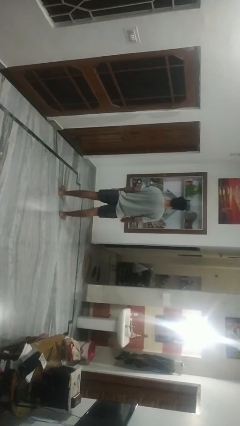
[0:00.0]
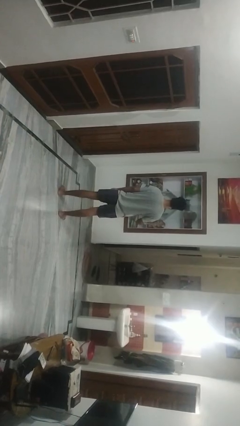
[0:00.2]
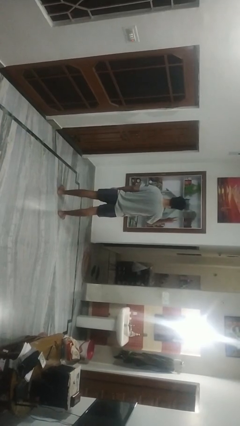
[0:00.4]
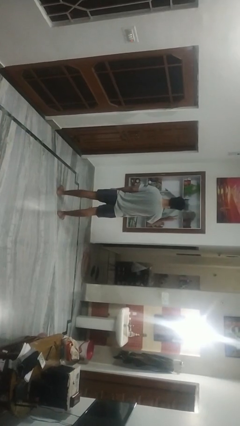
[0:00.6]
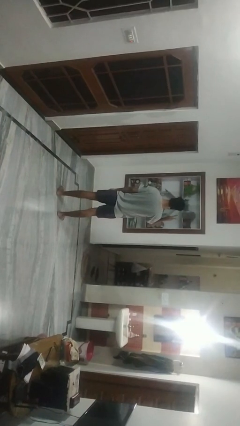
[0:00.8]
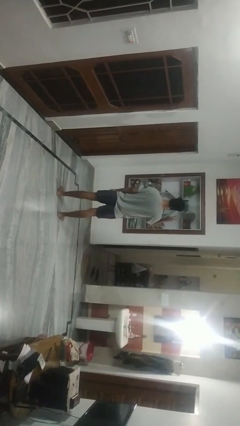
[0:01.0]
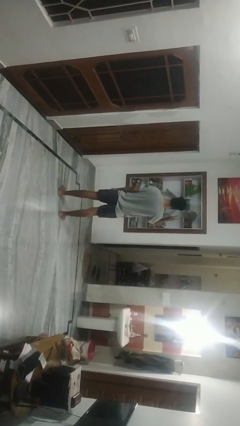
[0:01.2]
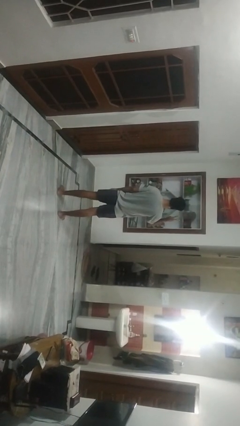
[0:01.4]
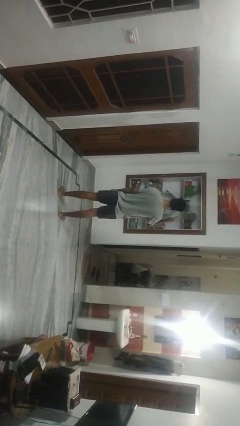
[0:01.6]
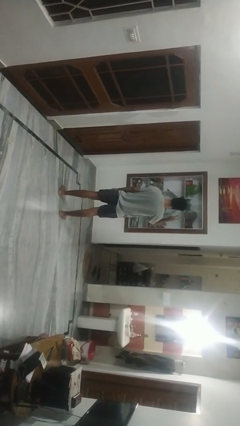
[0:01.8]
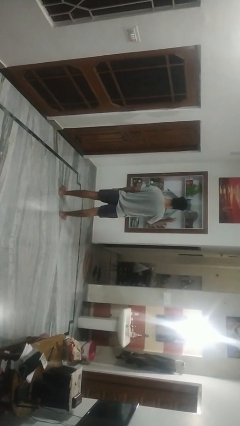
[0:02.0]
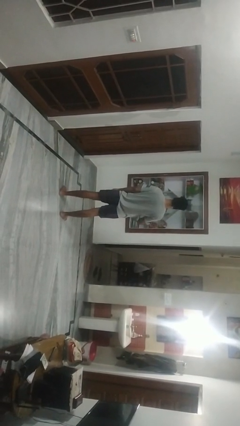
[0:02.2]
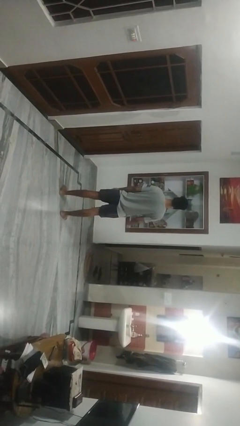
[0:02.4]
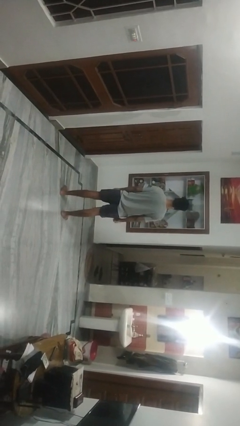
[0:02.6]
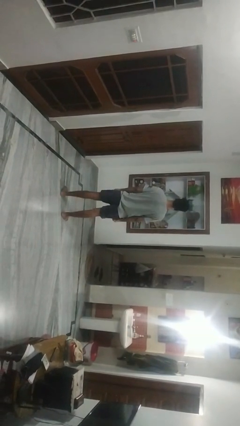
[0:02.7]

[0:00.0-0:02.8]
person gestures peace

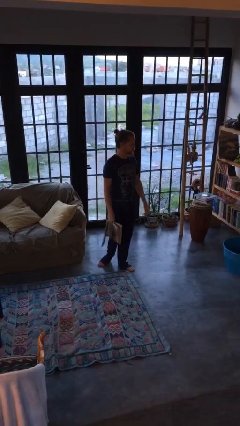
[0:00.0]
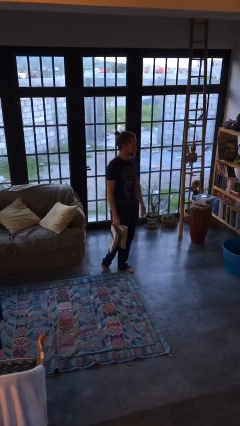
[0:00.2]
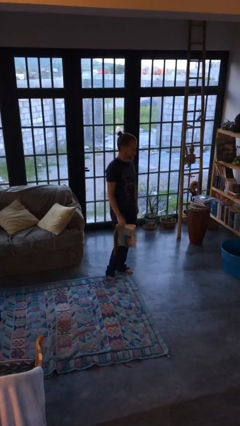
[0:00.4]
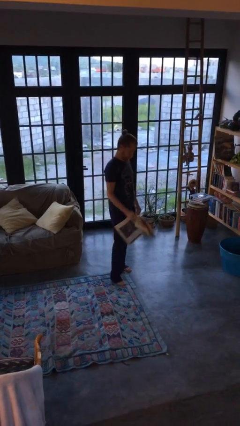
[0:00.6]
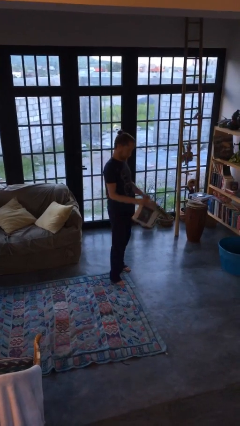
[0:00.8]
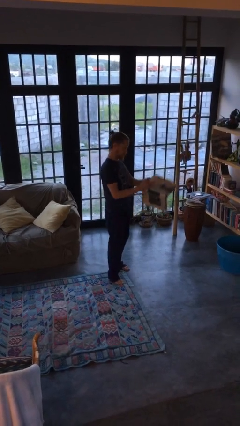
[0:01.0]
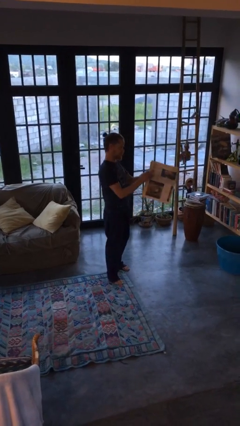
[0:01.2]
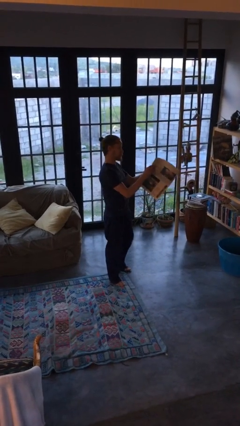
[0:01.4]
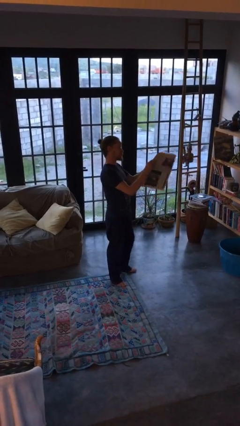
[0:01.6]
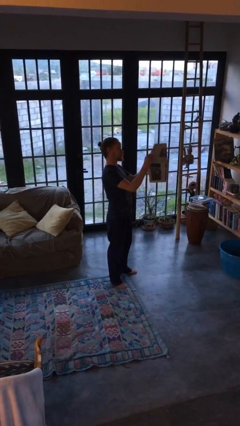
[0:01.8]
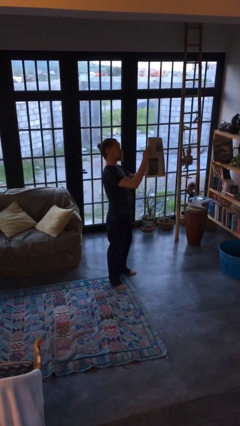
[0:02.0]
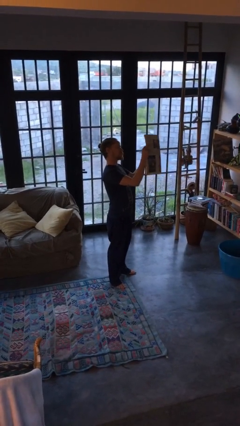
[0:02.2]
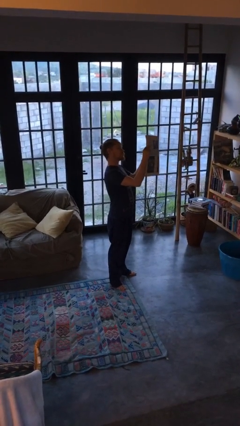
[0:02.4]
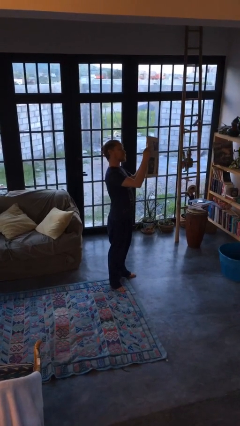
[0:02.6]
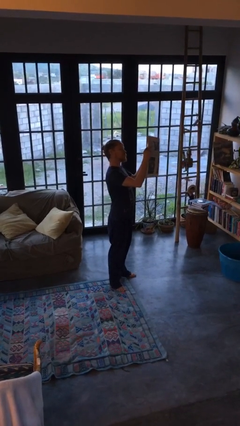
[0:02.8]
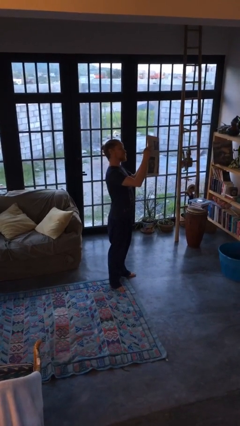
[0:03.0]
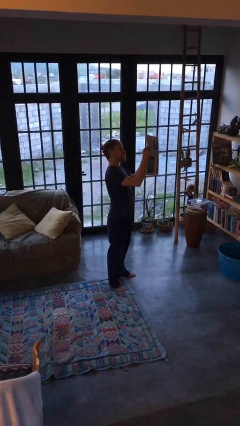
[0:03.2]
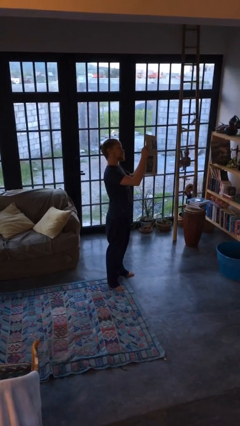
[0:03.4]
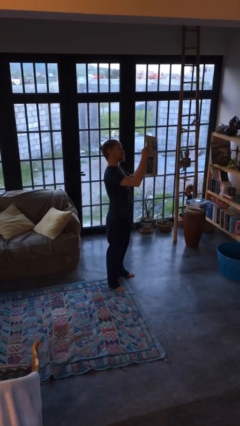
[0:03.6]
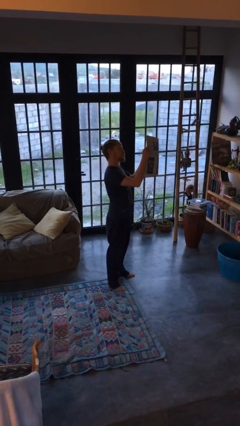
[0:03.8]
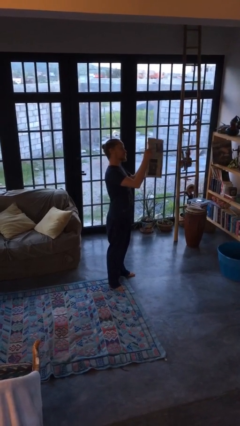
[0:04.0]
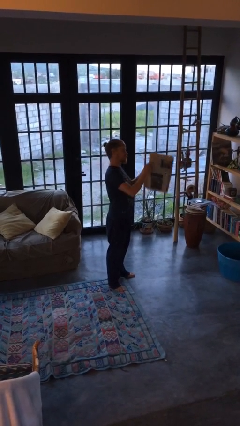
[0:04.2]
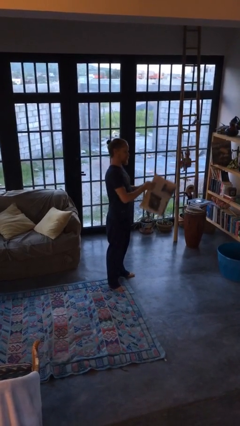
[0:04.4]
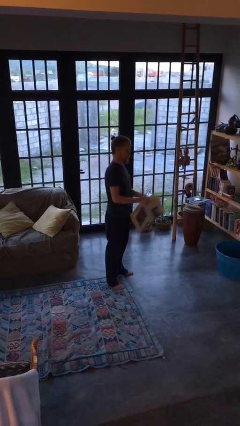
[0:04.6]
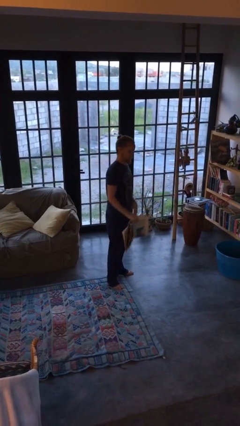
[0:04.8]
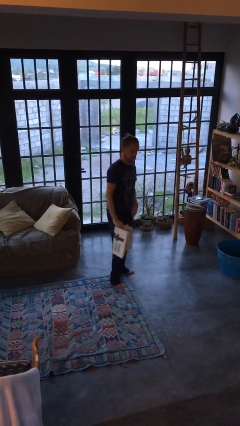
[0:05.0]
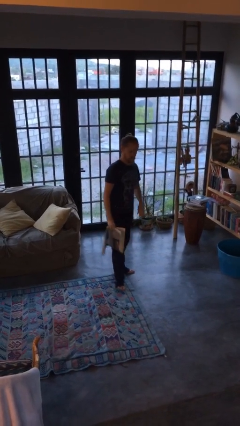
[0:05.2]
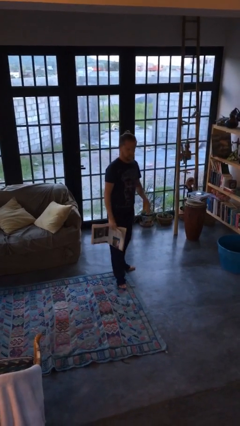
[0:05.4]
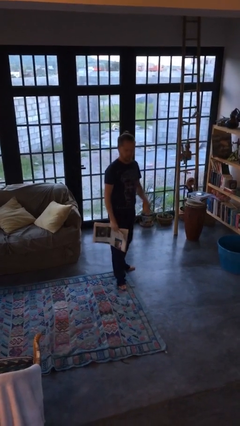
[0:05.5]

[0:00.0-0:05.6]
person reads newspaper

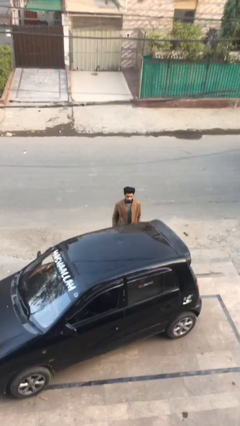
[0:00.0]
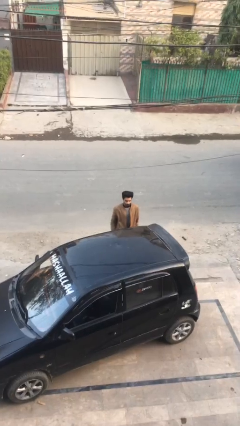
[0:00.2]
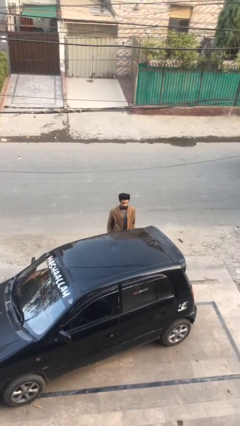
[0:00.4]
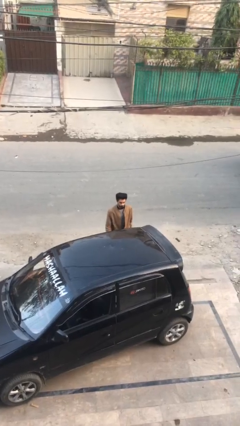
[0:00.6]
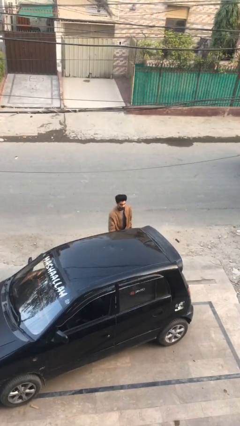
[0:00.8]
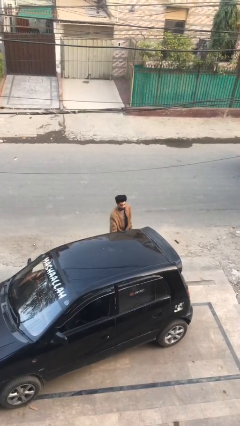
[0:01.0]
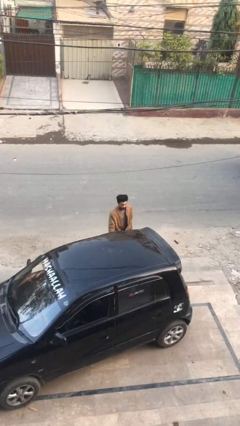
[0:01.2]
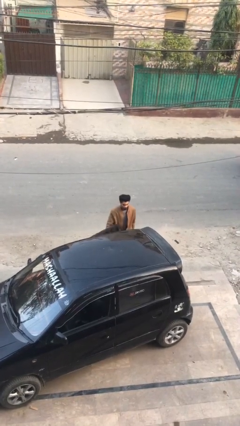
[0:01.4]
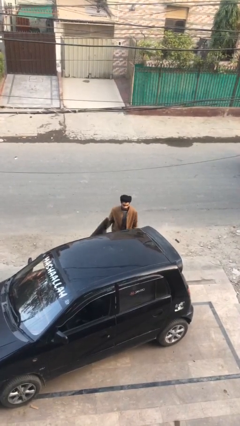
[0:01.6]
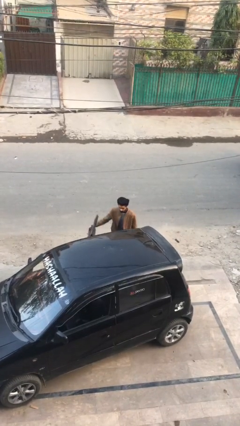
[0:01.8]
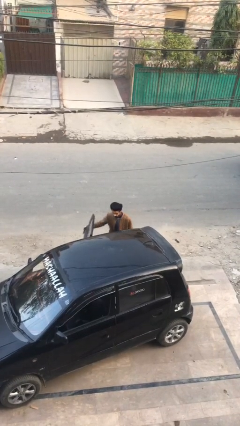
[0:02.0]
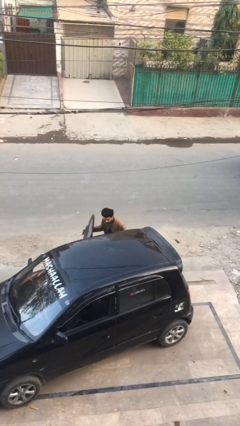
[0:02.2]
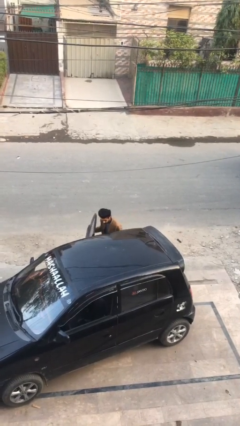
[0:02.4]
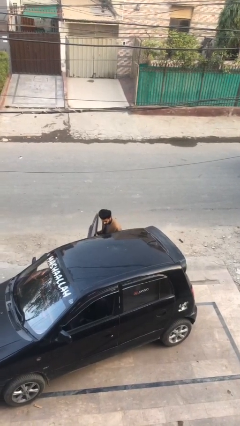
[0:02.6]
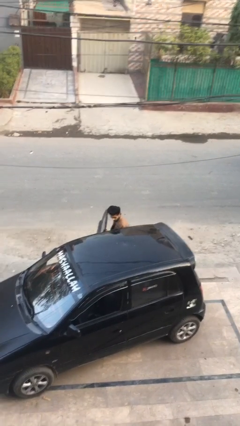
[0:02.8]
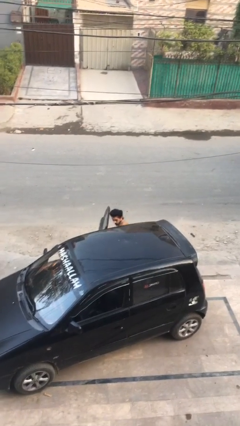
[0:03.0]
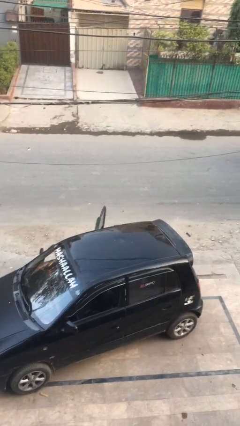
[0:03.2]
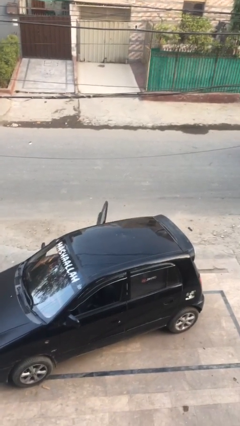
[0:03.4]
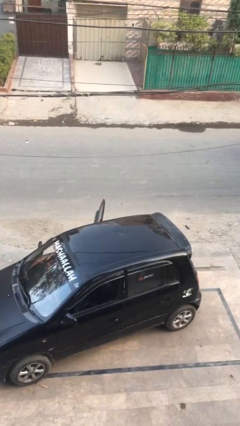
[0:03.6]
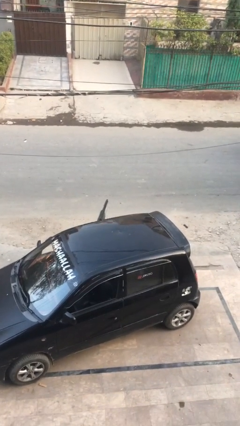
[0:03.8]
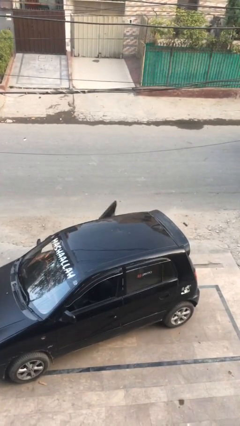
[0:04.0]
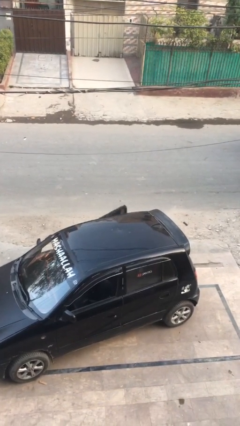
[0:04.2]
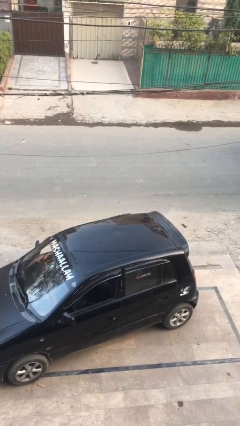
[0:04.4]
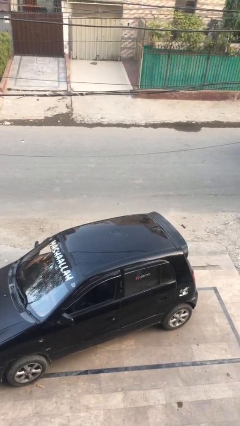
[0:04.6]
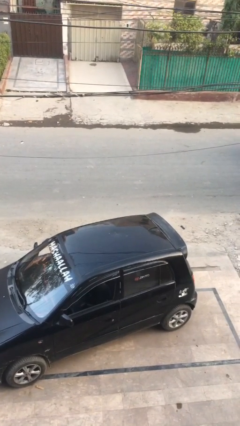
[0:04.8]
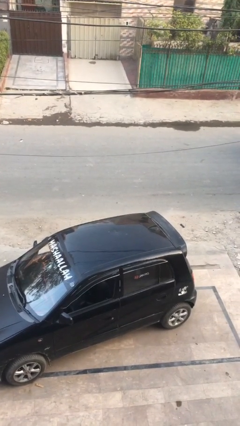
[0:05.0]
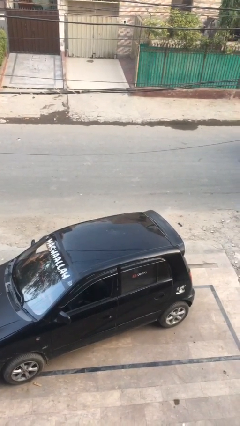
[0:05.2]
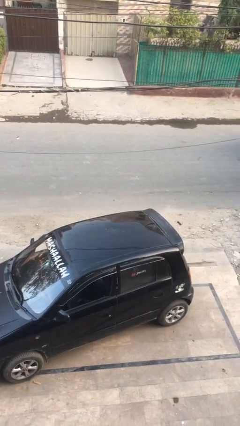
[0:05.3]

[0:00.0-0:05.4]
person enters car

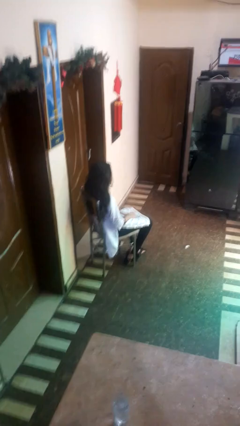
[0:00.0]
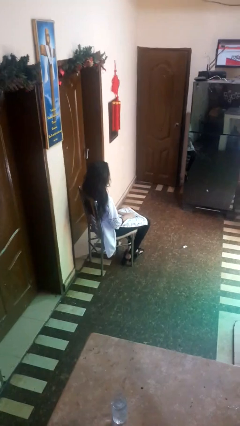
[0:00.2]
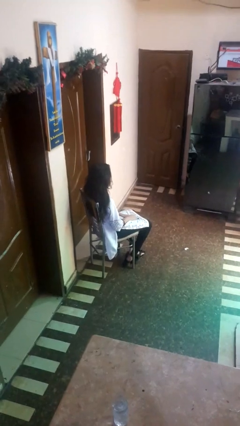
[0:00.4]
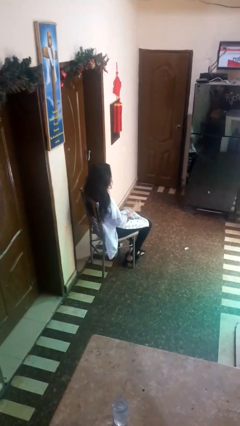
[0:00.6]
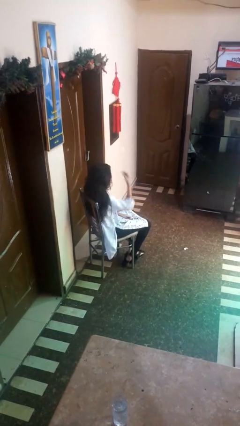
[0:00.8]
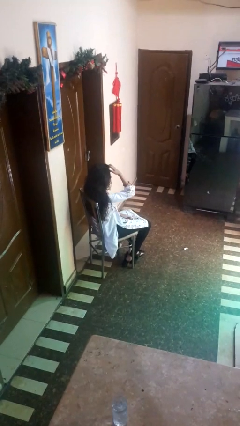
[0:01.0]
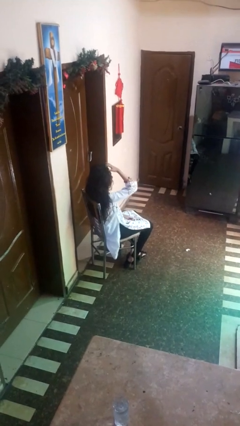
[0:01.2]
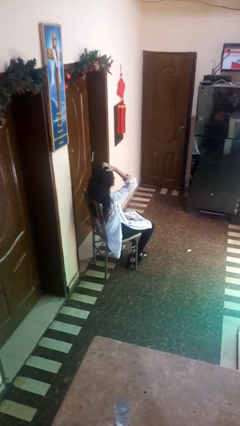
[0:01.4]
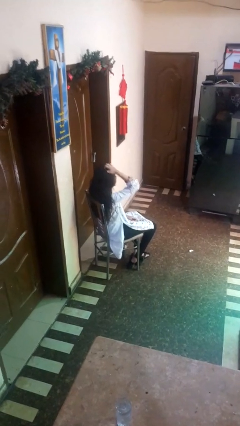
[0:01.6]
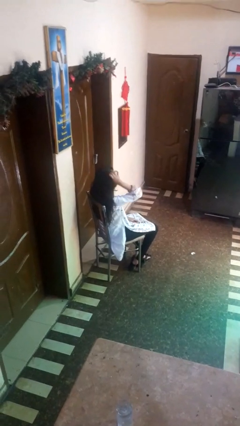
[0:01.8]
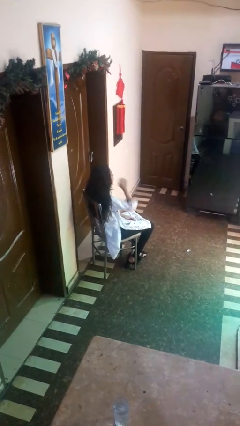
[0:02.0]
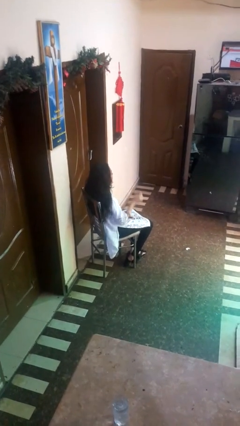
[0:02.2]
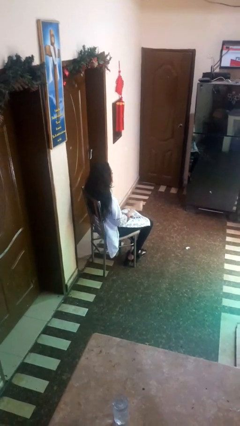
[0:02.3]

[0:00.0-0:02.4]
person strokes hair

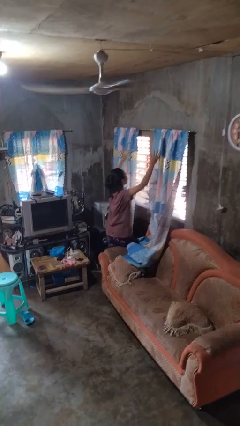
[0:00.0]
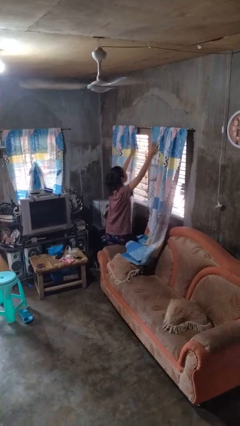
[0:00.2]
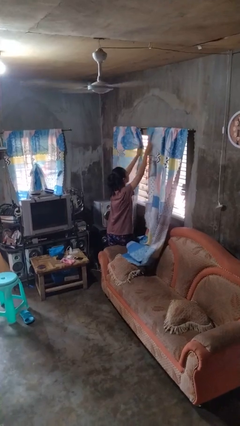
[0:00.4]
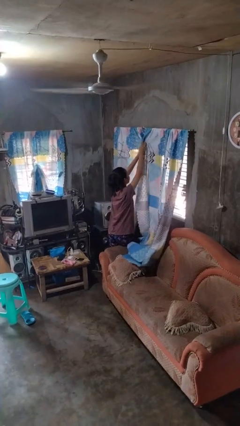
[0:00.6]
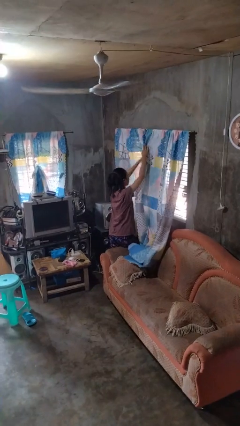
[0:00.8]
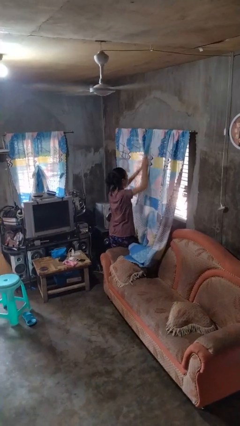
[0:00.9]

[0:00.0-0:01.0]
person closes curtains
